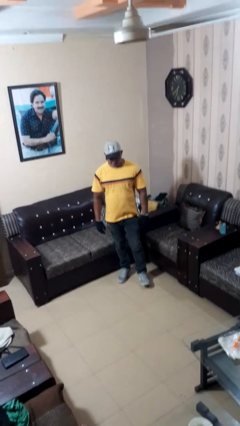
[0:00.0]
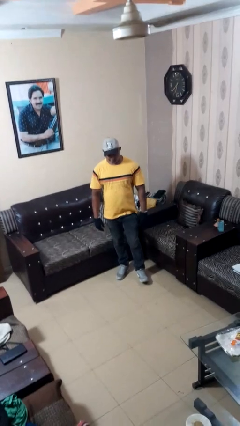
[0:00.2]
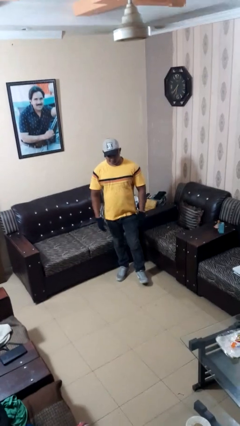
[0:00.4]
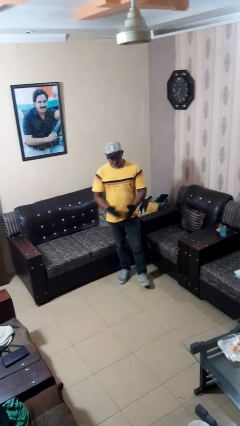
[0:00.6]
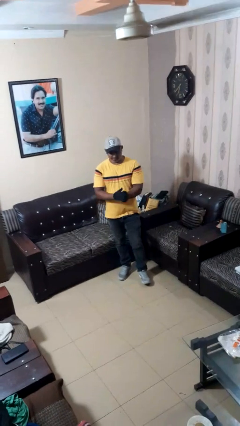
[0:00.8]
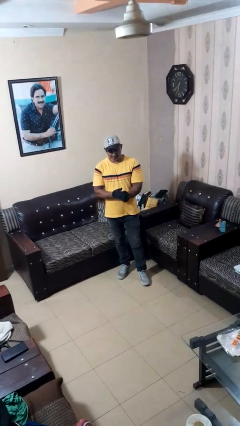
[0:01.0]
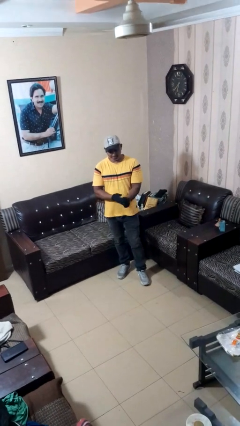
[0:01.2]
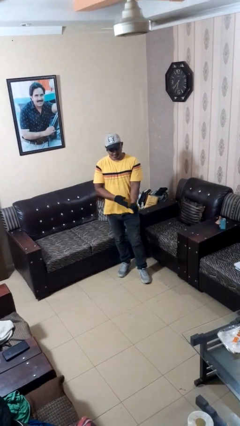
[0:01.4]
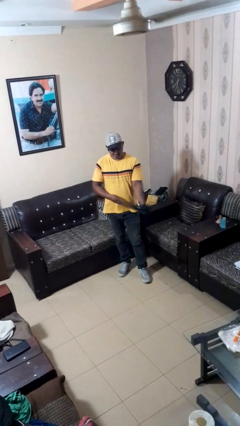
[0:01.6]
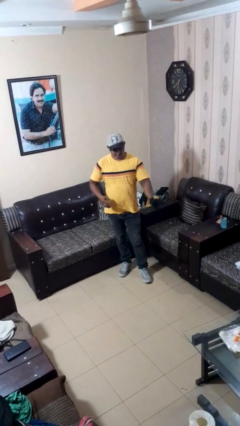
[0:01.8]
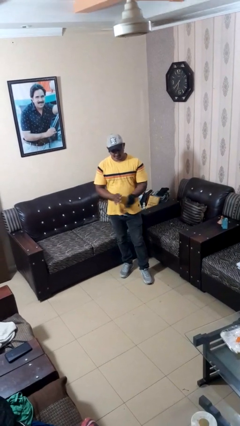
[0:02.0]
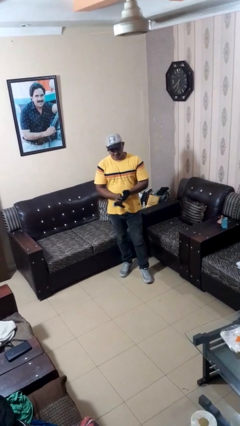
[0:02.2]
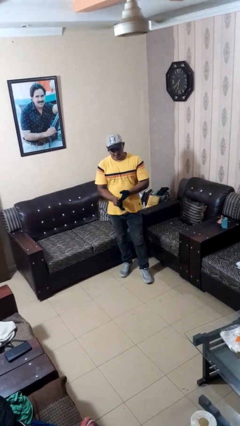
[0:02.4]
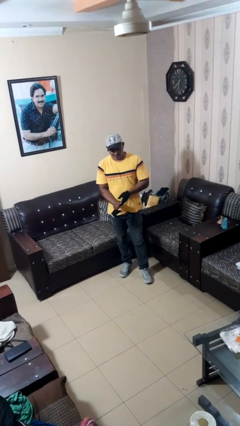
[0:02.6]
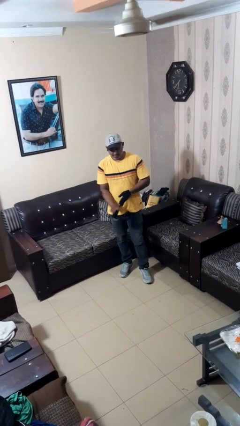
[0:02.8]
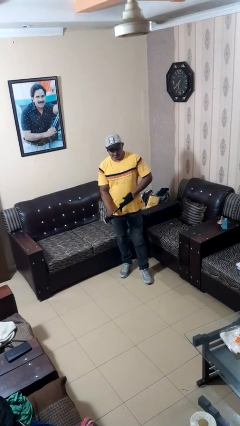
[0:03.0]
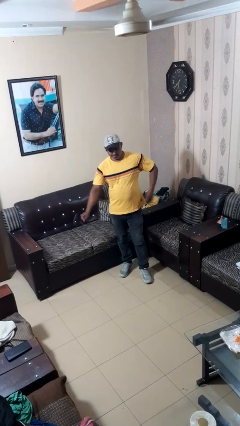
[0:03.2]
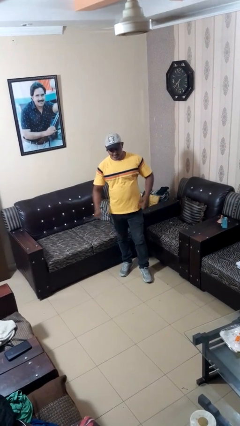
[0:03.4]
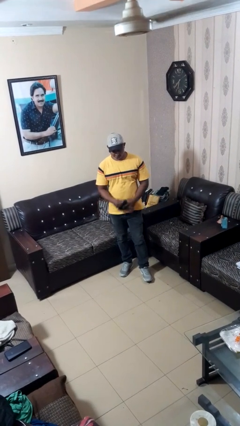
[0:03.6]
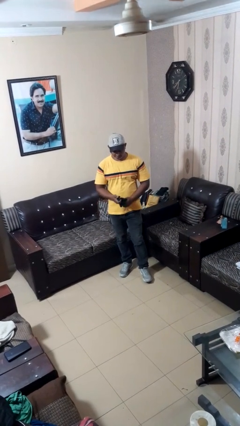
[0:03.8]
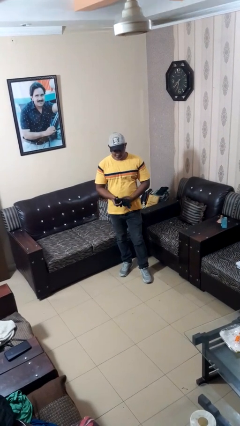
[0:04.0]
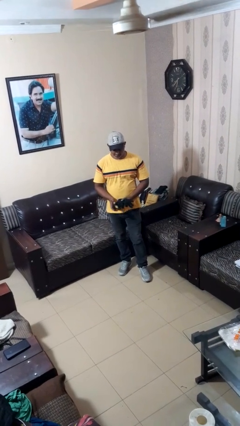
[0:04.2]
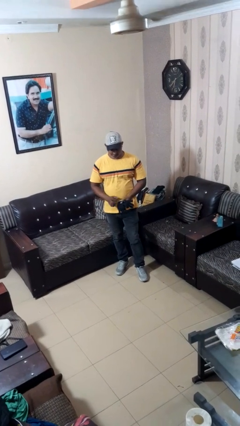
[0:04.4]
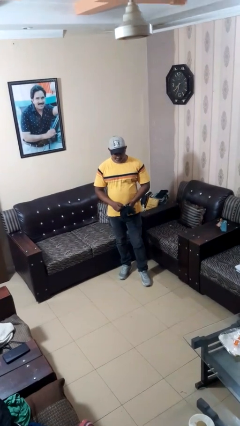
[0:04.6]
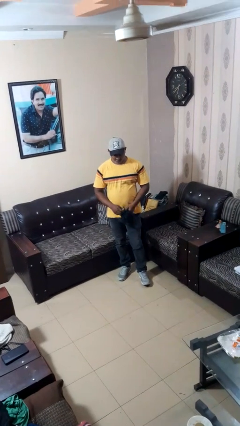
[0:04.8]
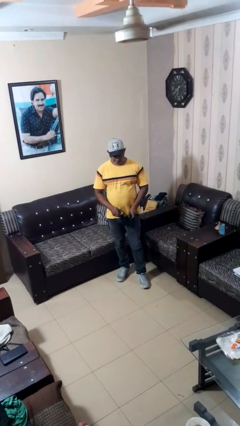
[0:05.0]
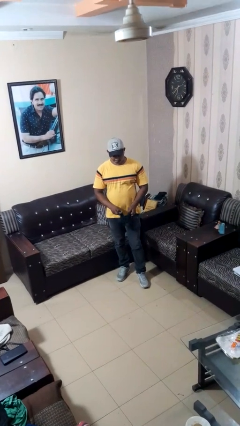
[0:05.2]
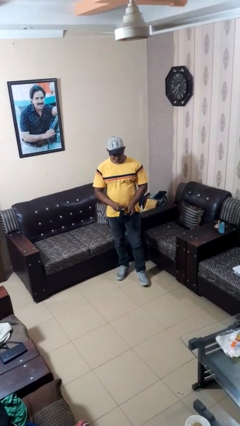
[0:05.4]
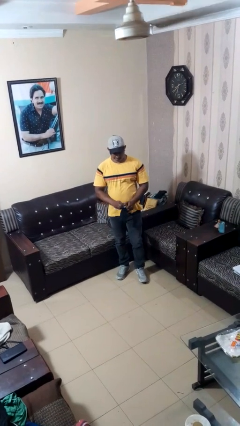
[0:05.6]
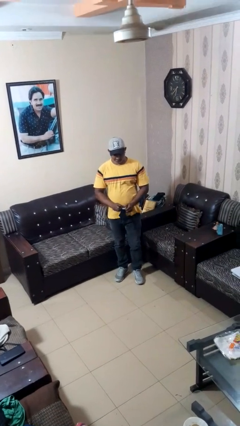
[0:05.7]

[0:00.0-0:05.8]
person takes off gloves

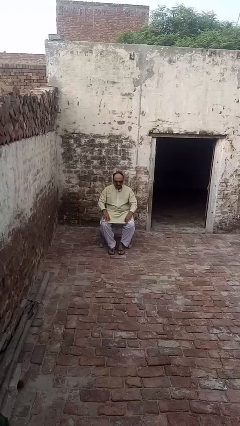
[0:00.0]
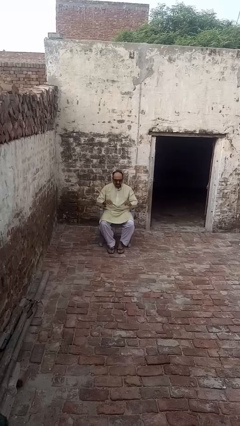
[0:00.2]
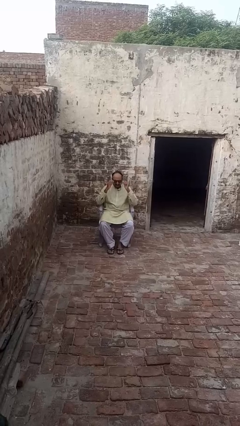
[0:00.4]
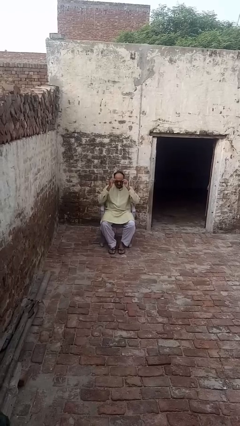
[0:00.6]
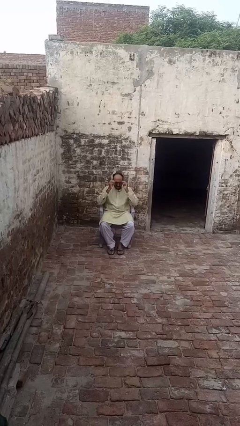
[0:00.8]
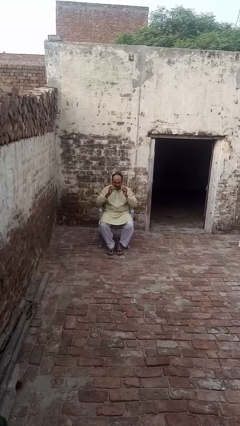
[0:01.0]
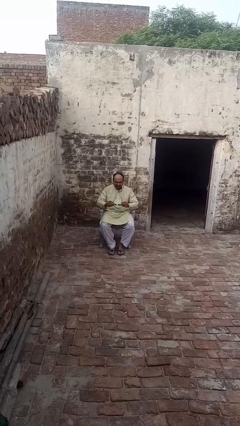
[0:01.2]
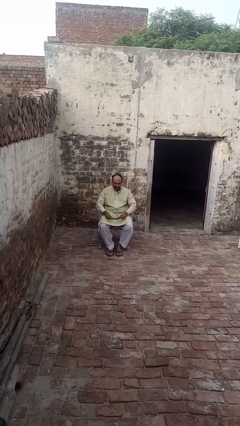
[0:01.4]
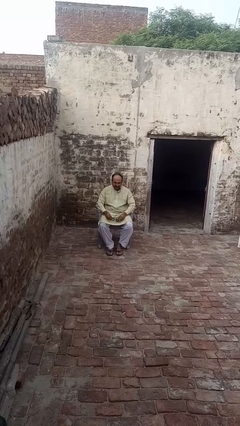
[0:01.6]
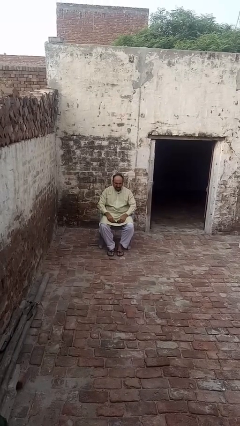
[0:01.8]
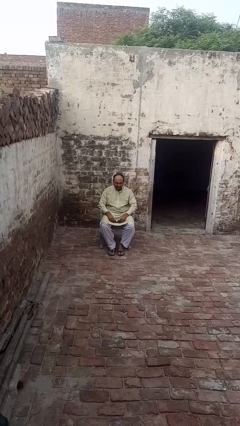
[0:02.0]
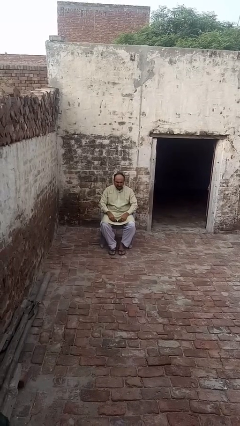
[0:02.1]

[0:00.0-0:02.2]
person takes off sunglasses

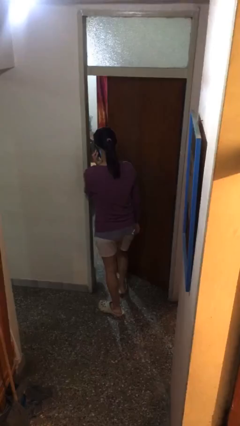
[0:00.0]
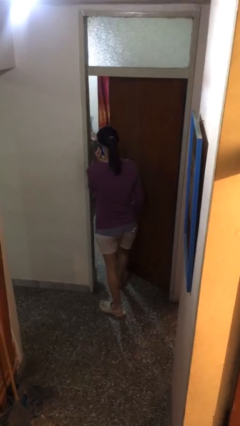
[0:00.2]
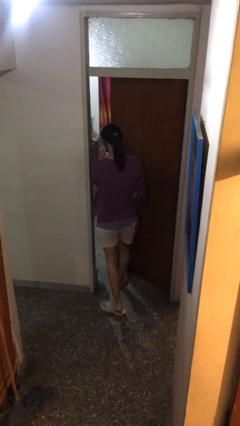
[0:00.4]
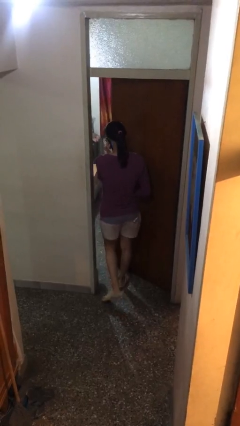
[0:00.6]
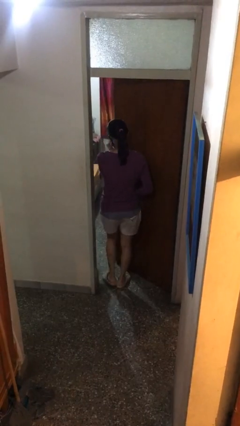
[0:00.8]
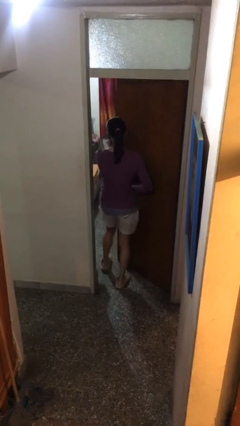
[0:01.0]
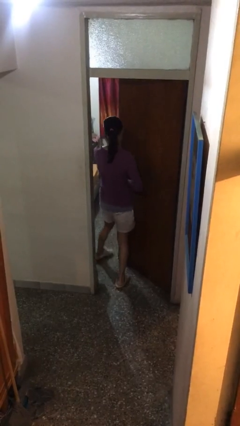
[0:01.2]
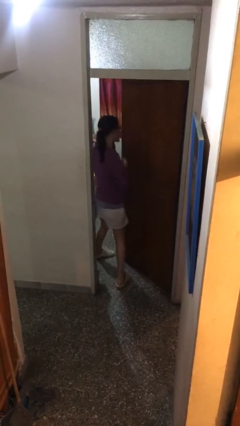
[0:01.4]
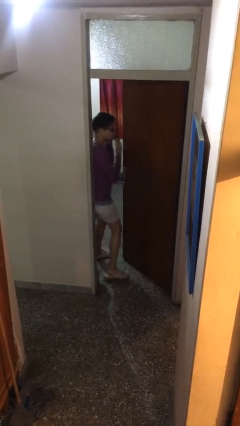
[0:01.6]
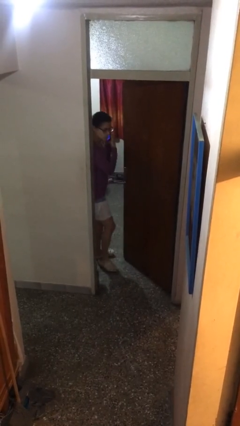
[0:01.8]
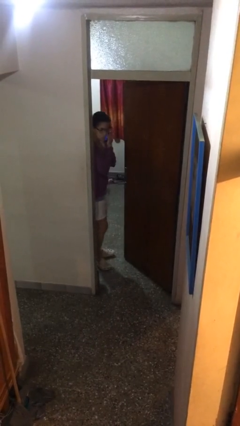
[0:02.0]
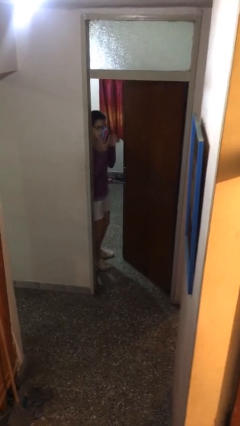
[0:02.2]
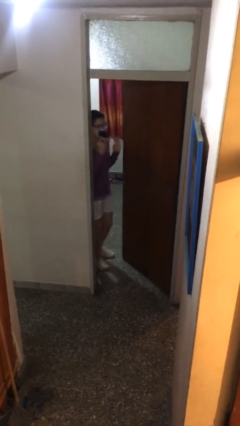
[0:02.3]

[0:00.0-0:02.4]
person exits scene through structure

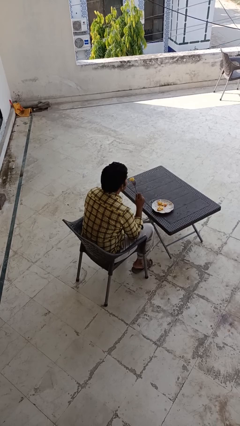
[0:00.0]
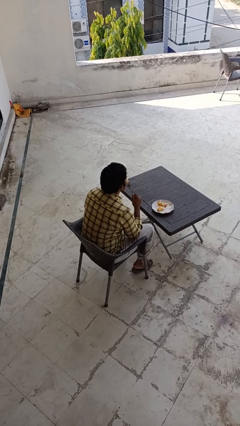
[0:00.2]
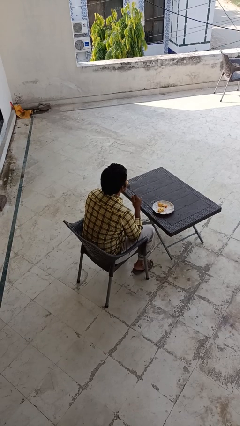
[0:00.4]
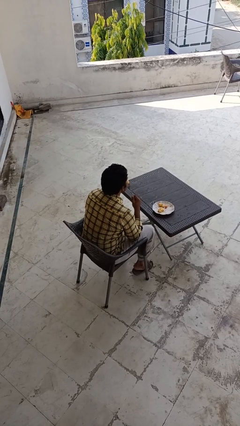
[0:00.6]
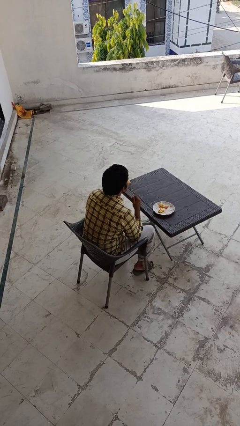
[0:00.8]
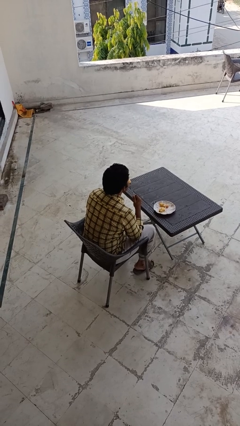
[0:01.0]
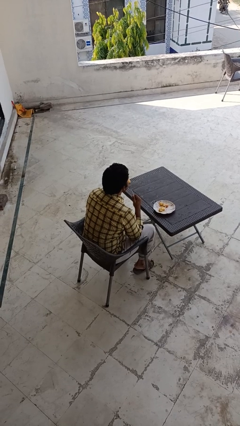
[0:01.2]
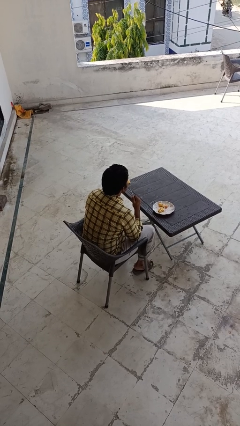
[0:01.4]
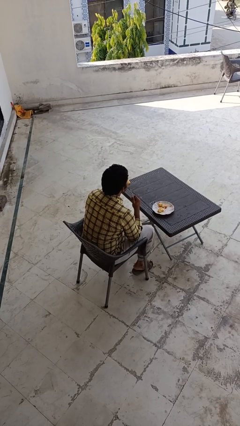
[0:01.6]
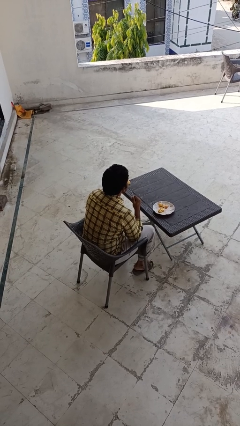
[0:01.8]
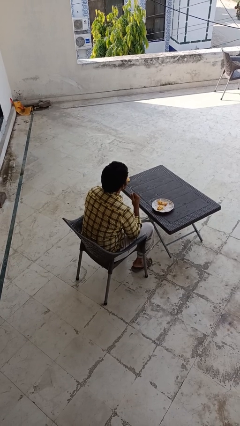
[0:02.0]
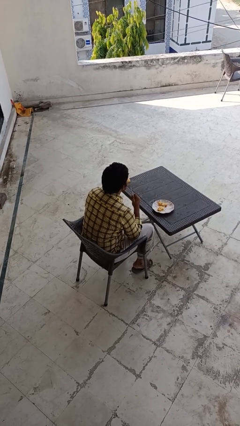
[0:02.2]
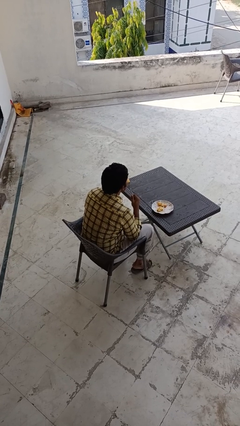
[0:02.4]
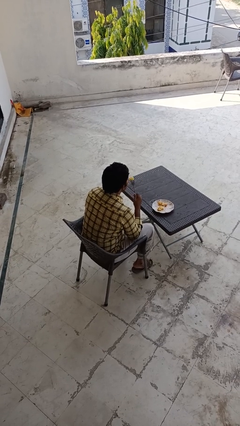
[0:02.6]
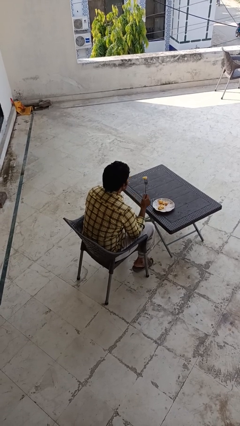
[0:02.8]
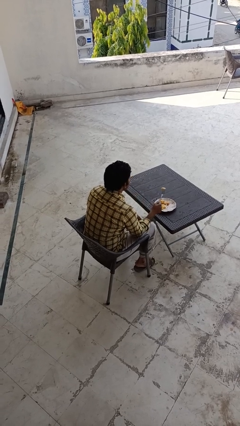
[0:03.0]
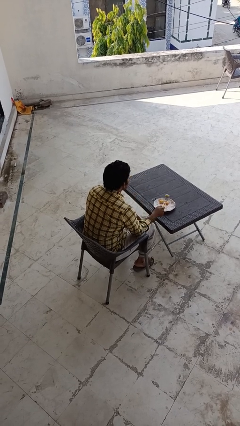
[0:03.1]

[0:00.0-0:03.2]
person eats with utensil

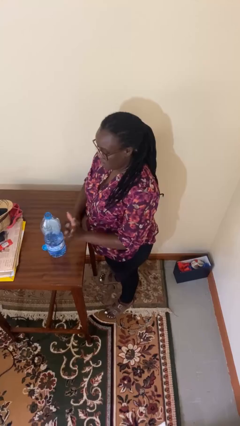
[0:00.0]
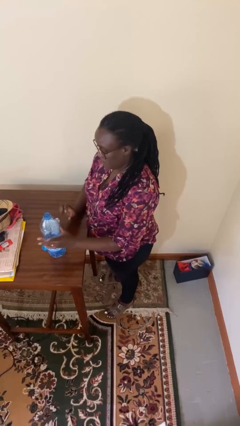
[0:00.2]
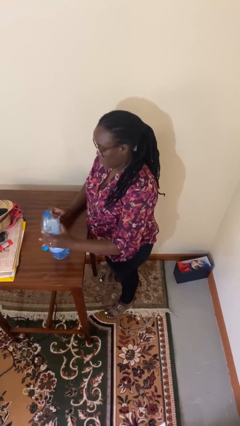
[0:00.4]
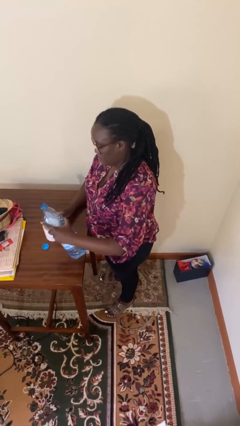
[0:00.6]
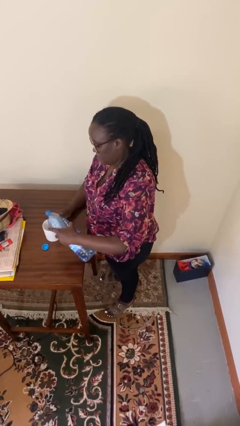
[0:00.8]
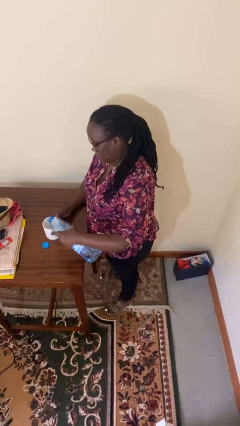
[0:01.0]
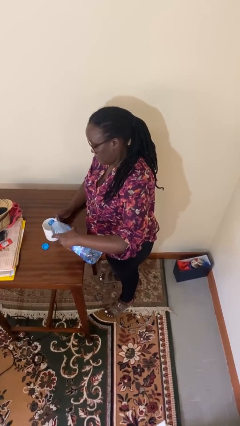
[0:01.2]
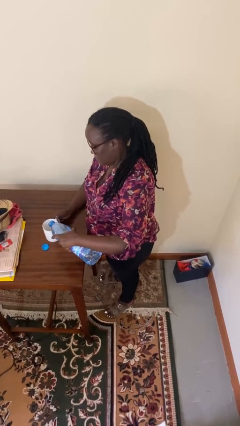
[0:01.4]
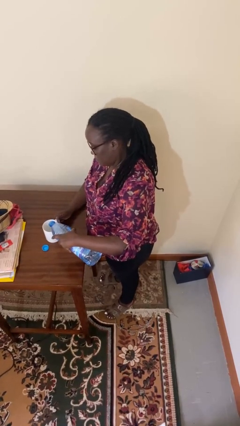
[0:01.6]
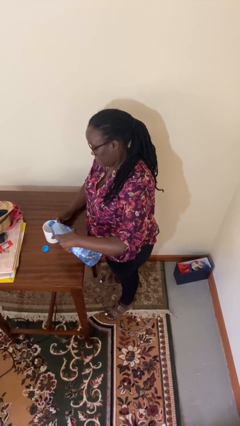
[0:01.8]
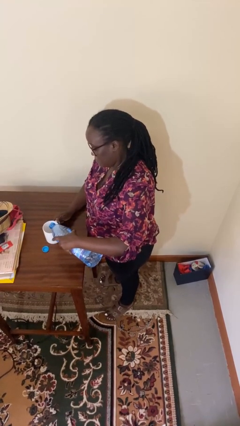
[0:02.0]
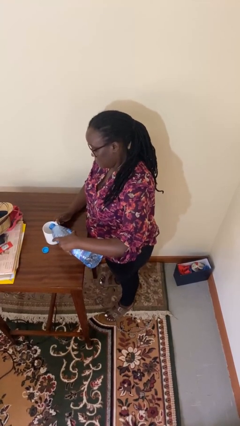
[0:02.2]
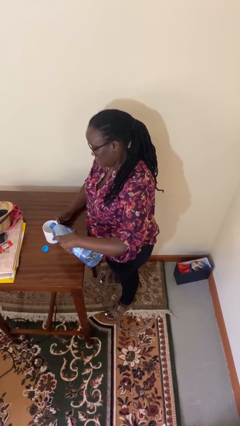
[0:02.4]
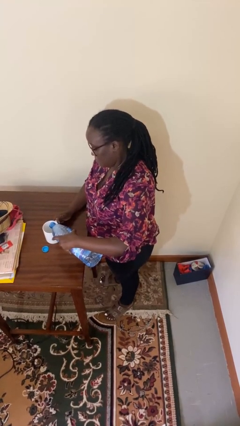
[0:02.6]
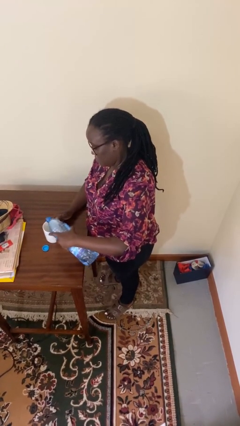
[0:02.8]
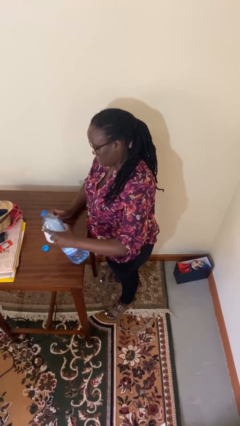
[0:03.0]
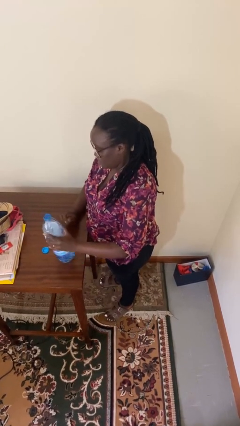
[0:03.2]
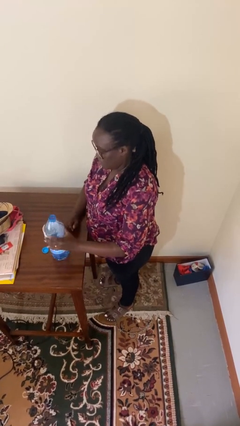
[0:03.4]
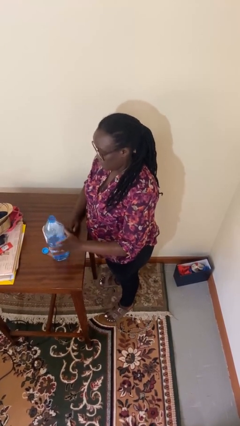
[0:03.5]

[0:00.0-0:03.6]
person pours liquid into cup

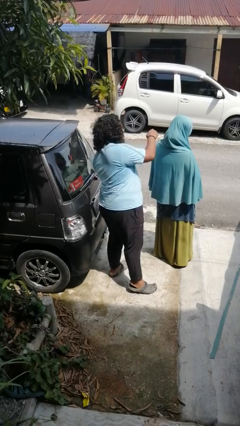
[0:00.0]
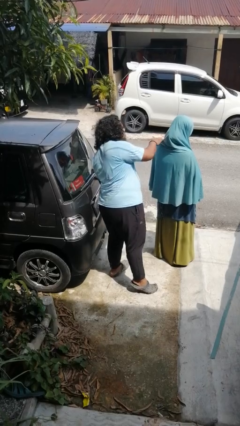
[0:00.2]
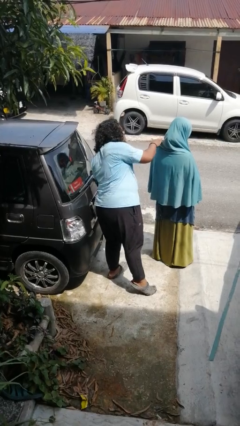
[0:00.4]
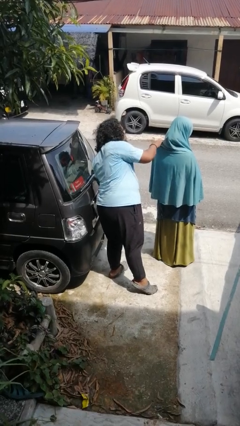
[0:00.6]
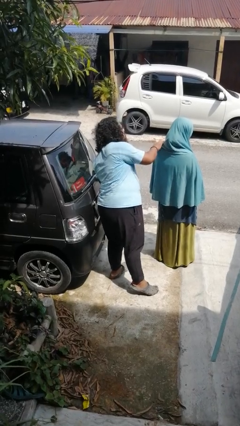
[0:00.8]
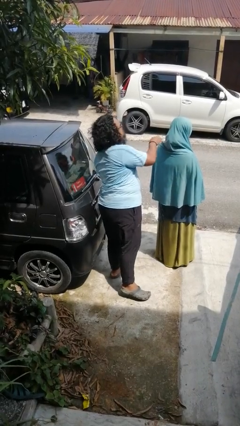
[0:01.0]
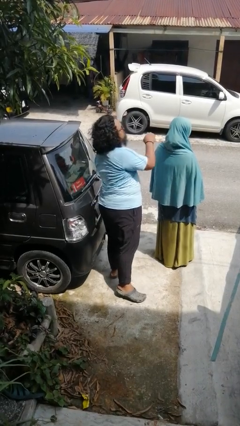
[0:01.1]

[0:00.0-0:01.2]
person touches back of person
